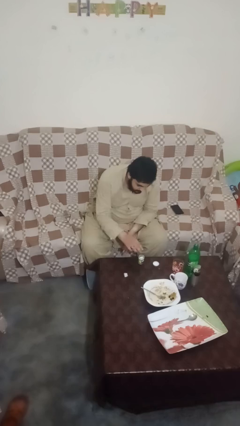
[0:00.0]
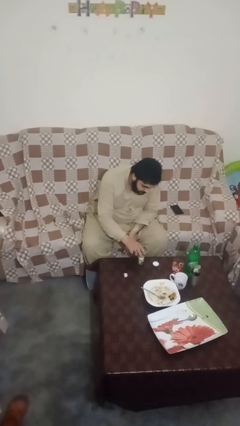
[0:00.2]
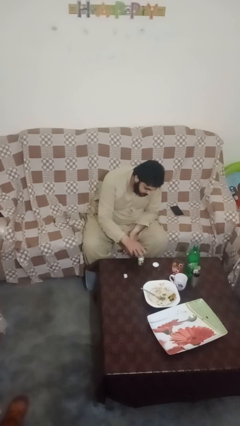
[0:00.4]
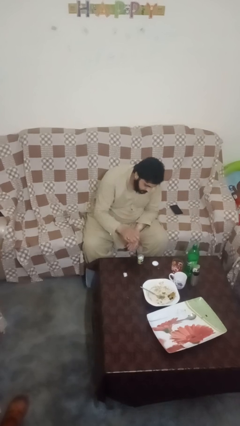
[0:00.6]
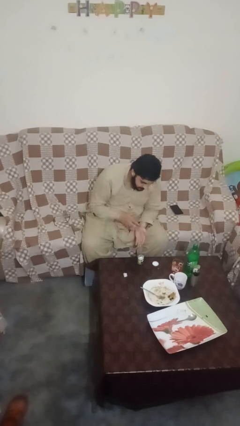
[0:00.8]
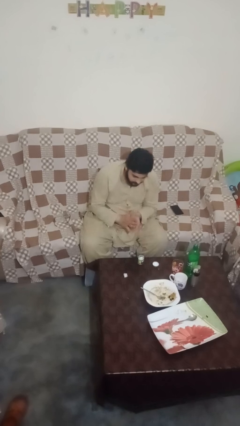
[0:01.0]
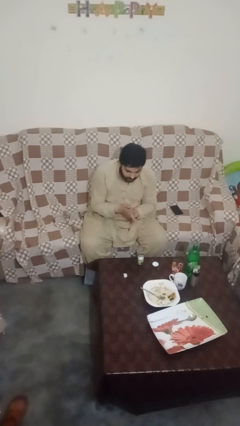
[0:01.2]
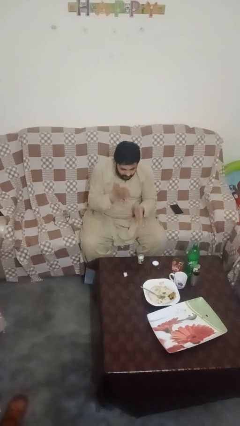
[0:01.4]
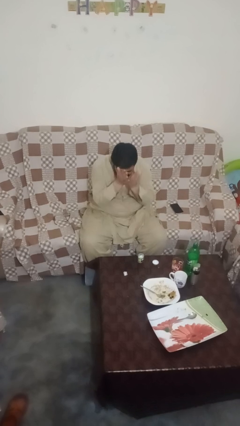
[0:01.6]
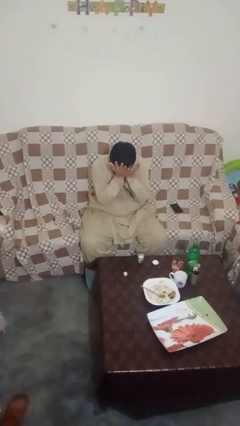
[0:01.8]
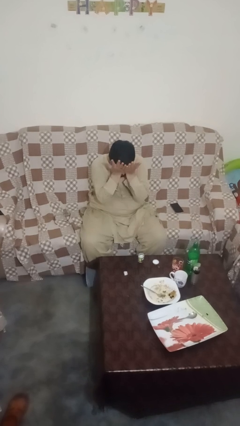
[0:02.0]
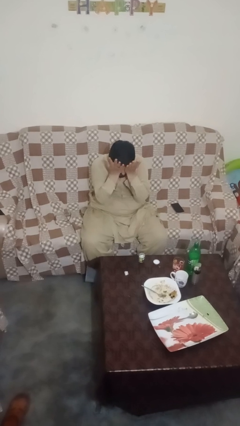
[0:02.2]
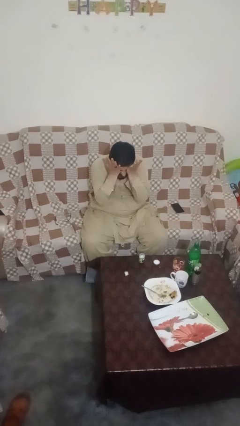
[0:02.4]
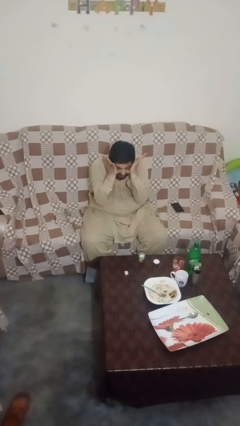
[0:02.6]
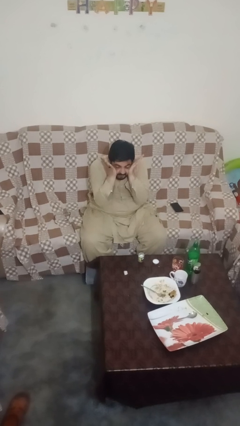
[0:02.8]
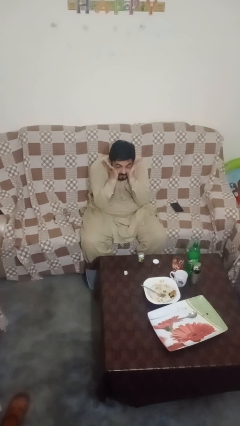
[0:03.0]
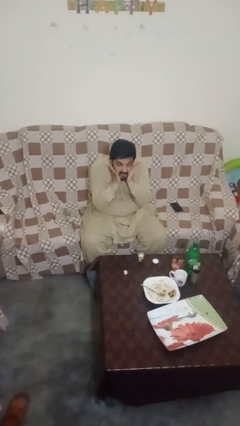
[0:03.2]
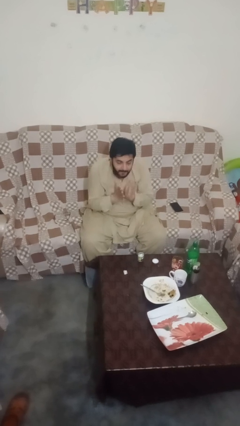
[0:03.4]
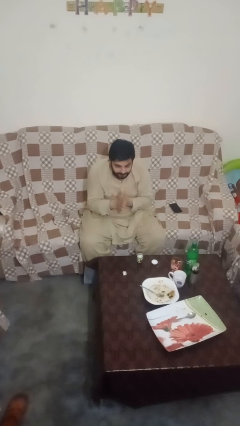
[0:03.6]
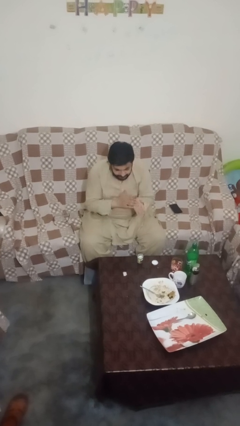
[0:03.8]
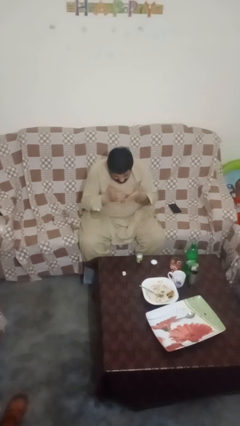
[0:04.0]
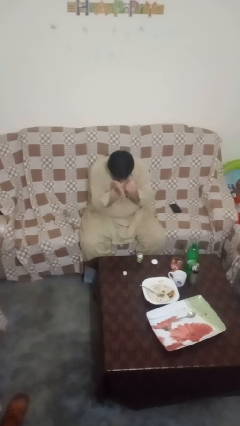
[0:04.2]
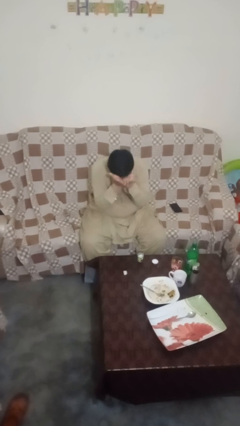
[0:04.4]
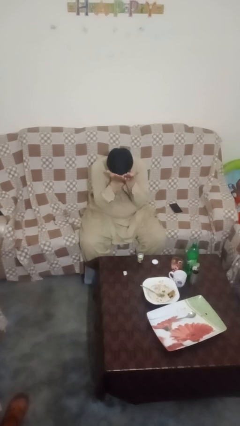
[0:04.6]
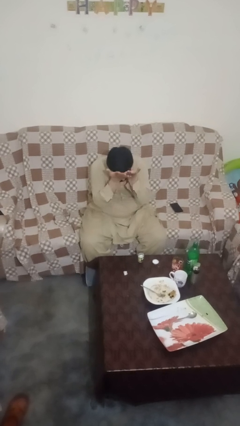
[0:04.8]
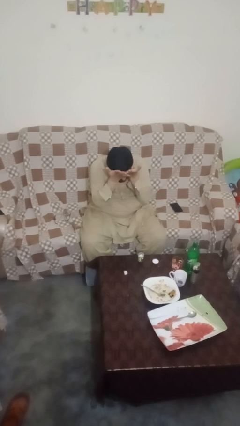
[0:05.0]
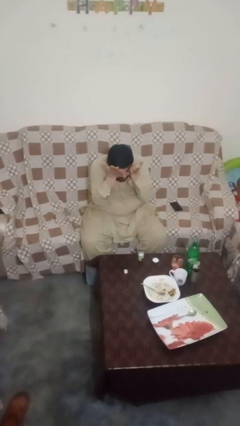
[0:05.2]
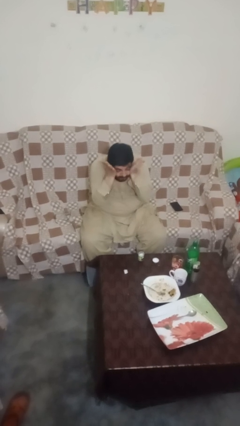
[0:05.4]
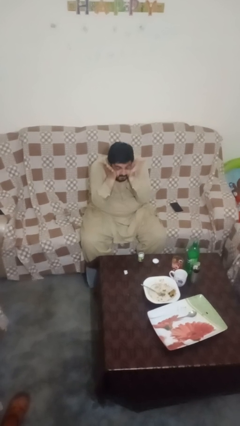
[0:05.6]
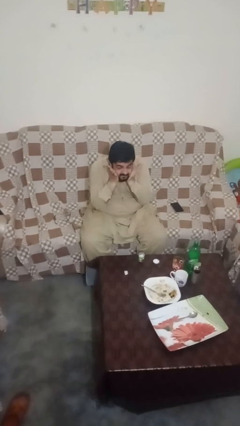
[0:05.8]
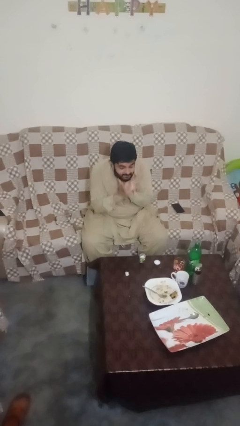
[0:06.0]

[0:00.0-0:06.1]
person applies facial moisturizer

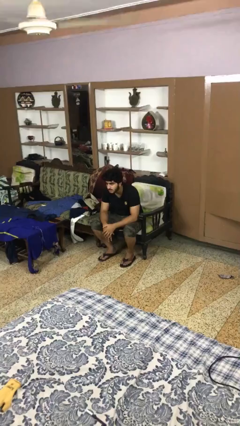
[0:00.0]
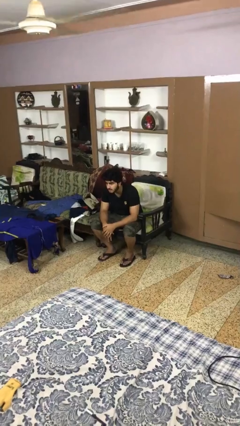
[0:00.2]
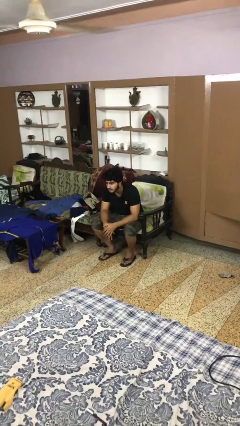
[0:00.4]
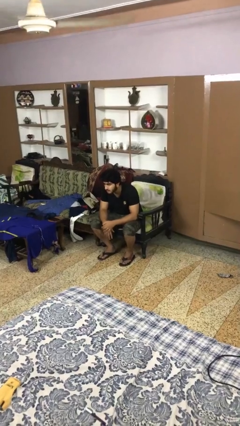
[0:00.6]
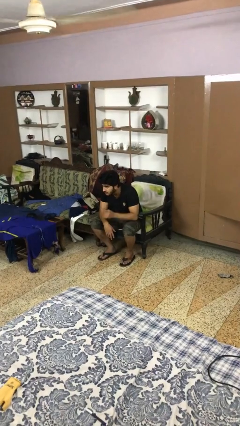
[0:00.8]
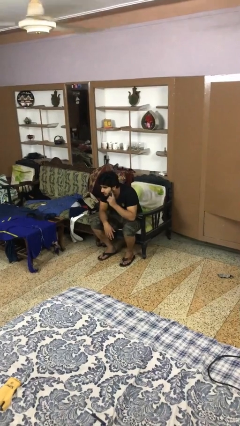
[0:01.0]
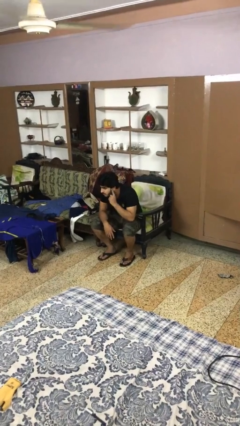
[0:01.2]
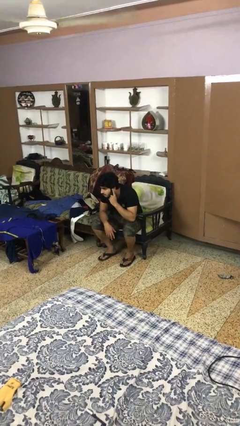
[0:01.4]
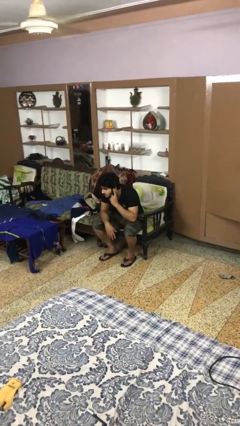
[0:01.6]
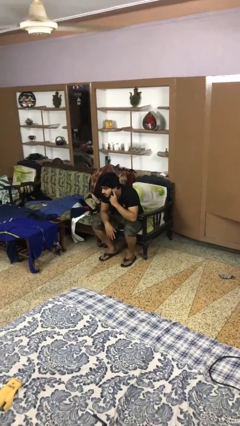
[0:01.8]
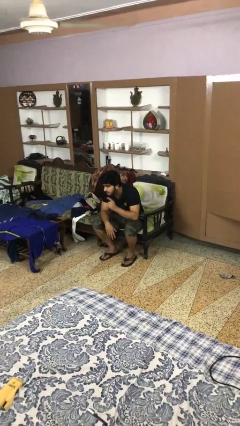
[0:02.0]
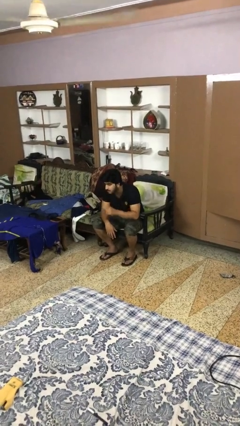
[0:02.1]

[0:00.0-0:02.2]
person gestures listen closely

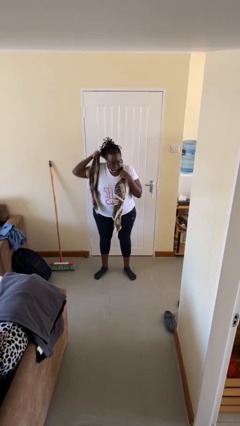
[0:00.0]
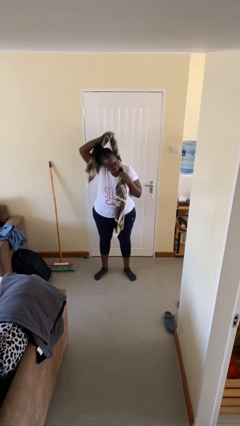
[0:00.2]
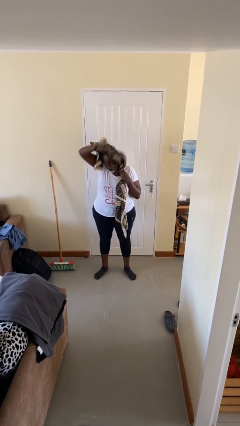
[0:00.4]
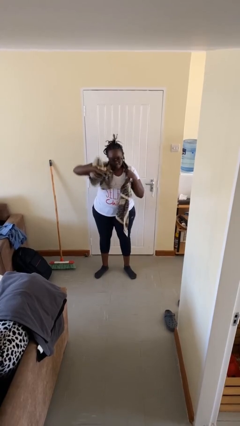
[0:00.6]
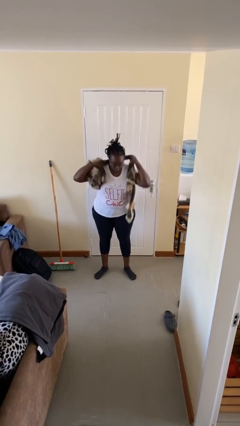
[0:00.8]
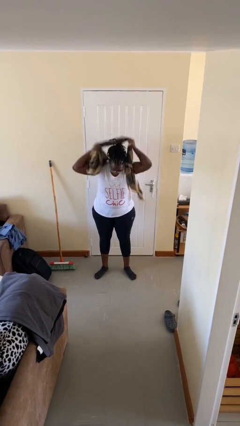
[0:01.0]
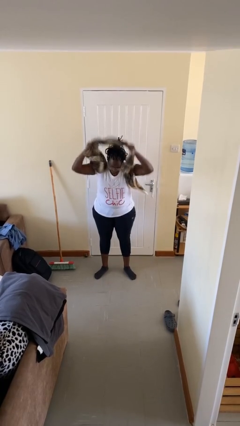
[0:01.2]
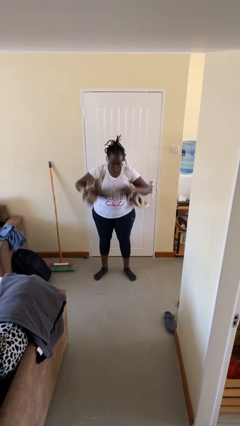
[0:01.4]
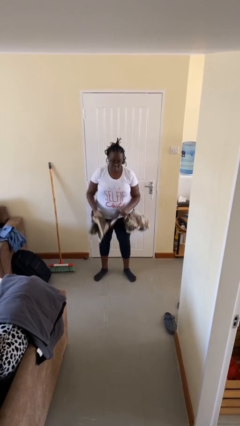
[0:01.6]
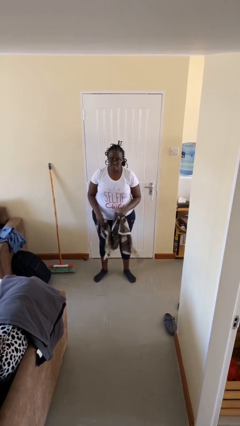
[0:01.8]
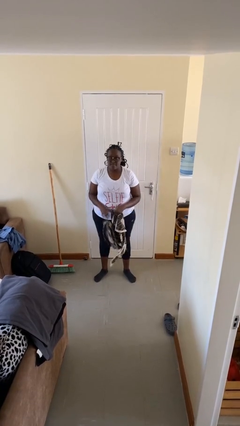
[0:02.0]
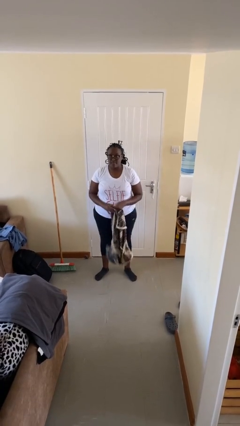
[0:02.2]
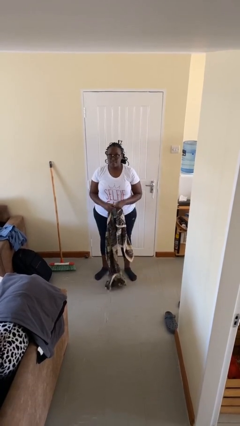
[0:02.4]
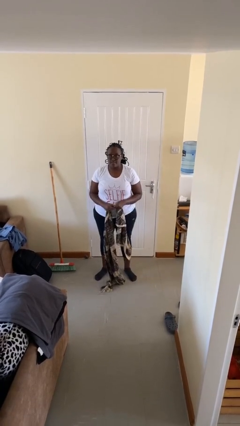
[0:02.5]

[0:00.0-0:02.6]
person takes off scarf

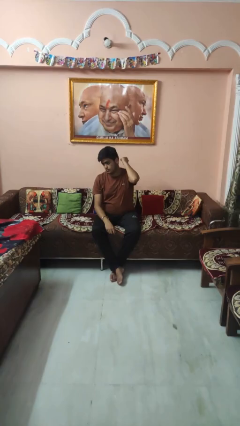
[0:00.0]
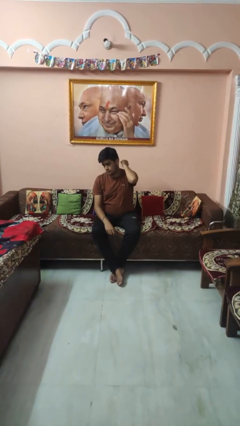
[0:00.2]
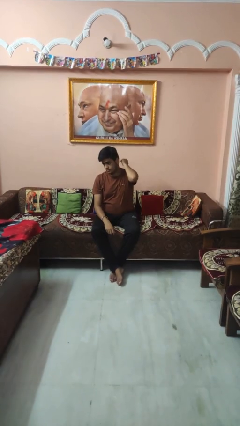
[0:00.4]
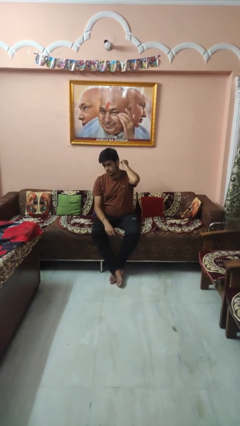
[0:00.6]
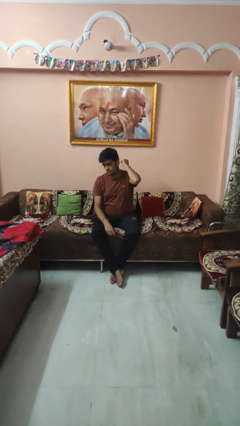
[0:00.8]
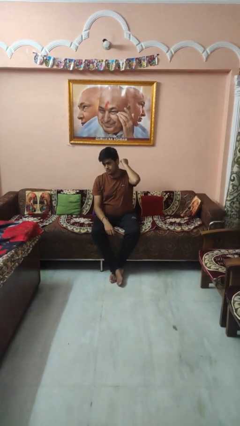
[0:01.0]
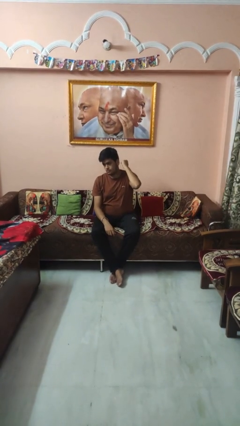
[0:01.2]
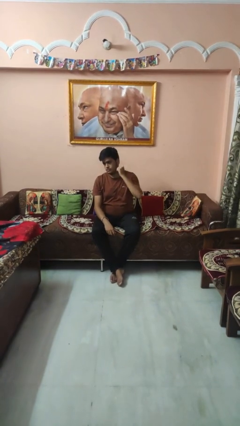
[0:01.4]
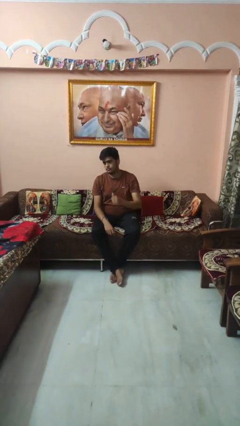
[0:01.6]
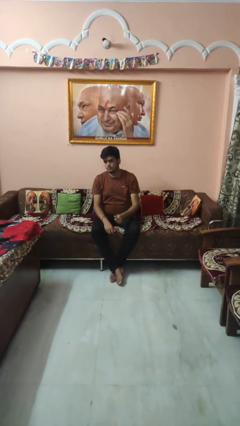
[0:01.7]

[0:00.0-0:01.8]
person gestures behind me

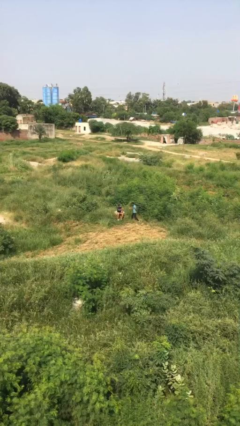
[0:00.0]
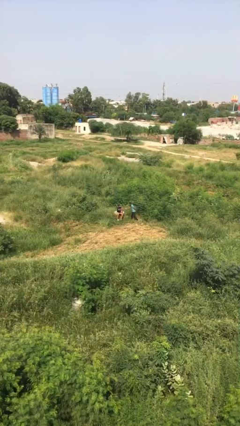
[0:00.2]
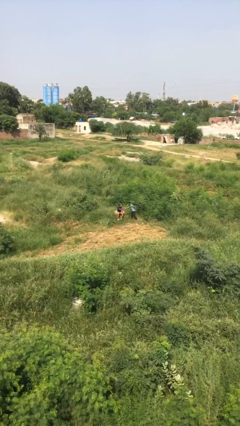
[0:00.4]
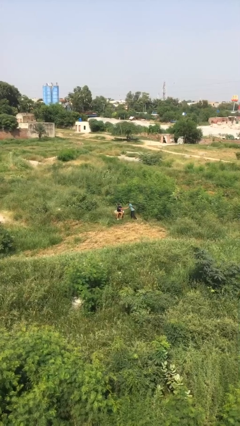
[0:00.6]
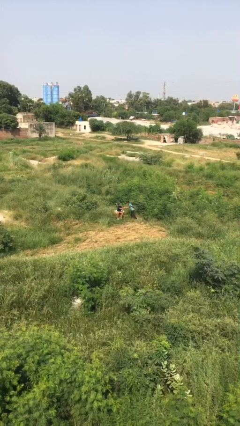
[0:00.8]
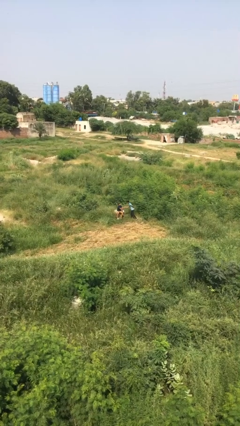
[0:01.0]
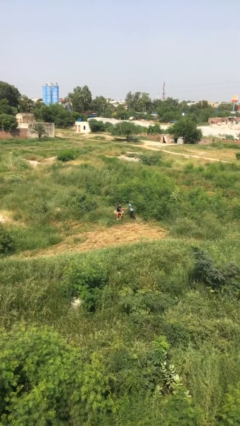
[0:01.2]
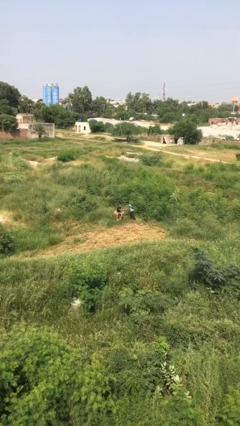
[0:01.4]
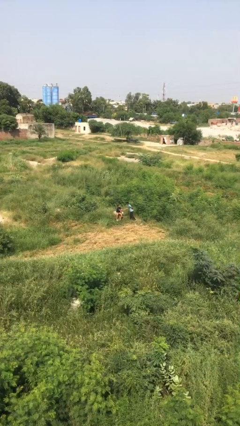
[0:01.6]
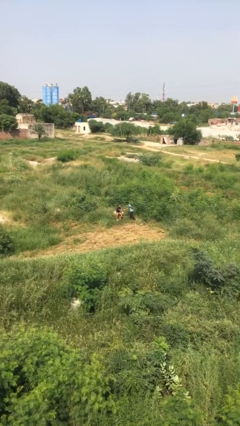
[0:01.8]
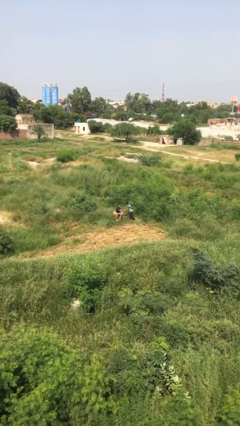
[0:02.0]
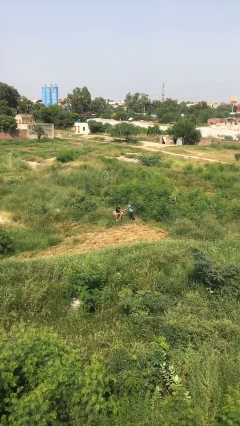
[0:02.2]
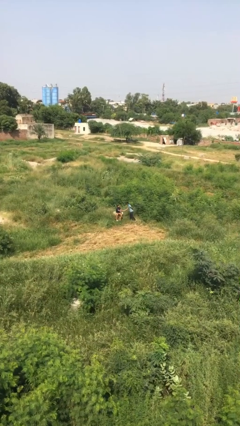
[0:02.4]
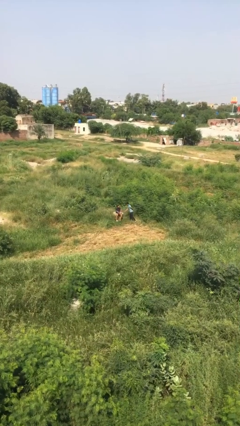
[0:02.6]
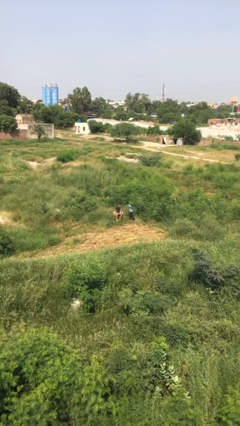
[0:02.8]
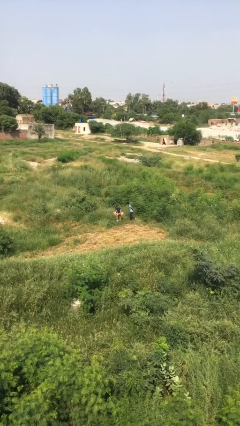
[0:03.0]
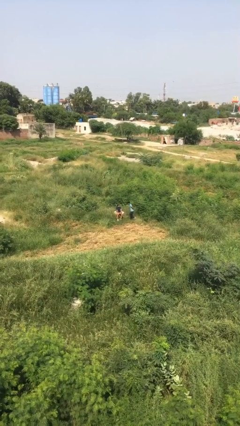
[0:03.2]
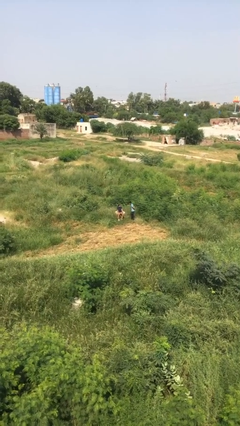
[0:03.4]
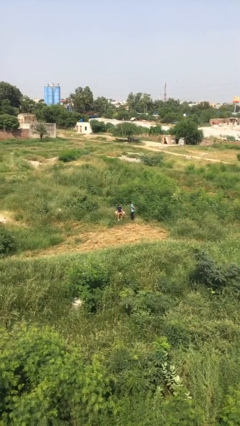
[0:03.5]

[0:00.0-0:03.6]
person shakes hand

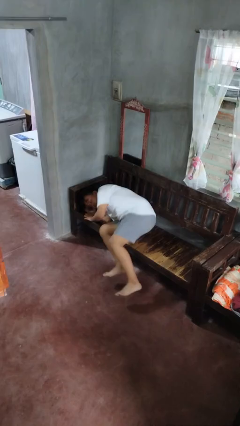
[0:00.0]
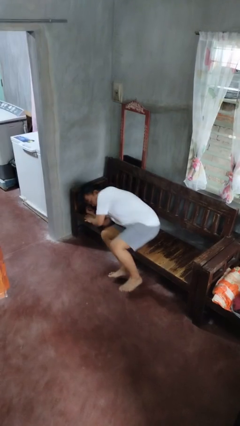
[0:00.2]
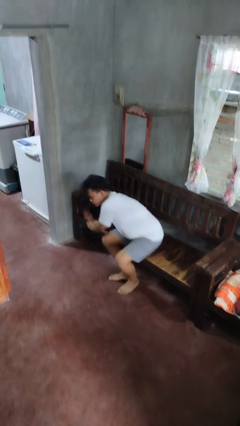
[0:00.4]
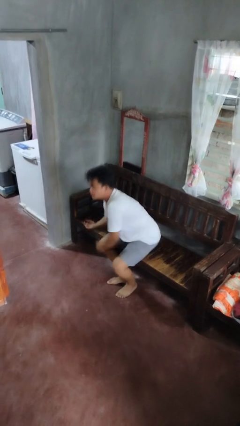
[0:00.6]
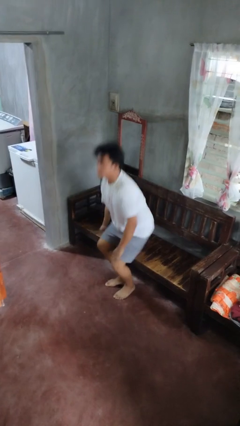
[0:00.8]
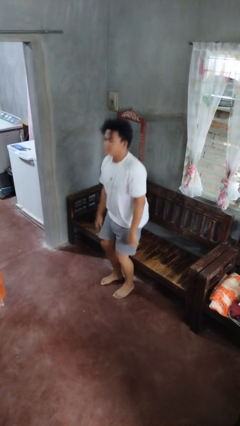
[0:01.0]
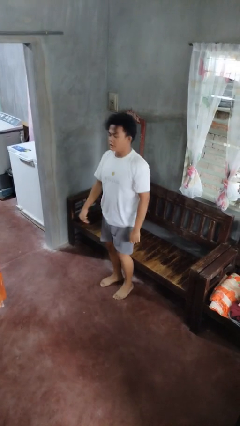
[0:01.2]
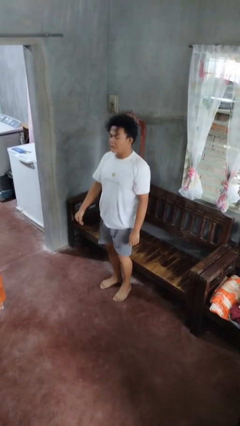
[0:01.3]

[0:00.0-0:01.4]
person stands up

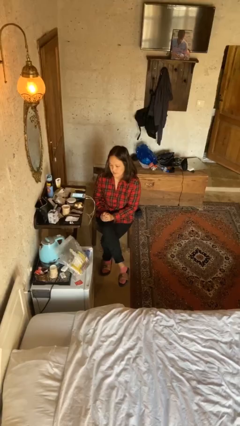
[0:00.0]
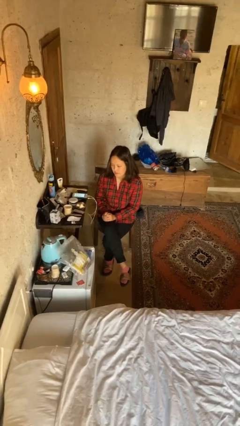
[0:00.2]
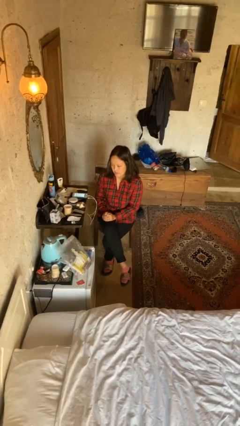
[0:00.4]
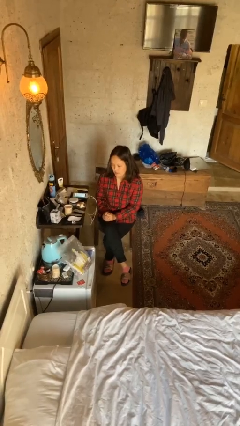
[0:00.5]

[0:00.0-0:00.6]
person licks fingers
